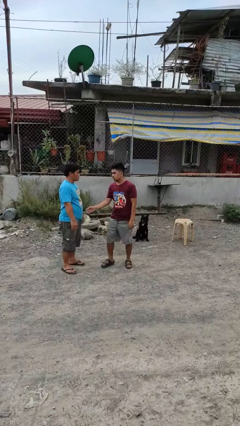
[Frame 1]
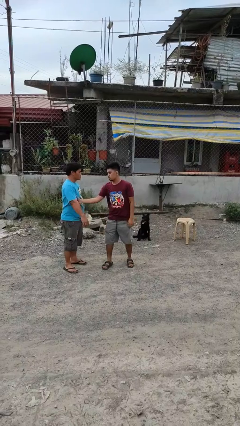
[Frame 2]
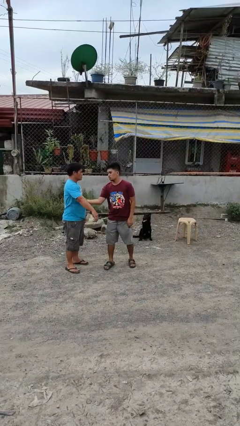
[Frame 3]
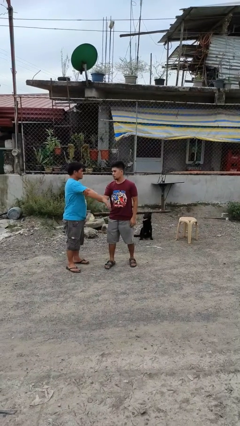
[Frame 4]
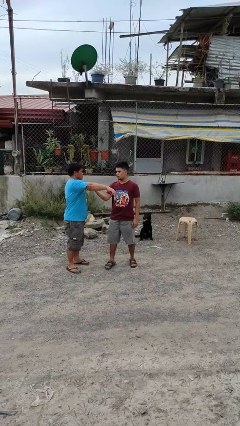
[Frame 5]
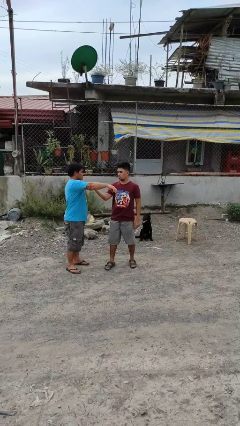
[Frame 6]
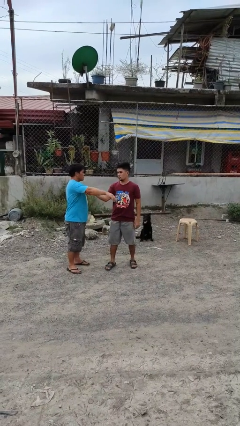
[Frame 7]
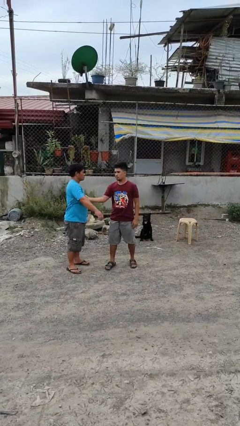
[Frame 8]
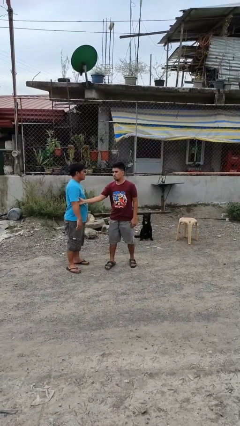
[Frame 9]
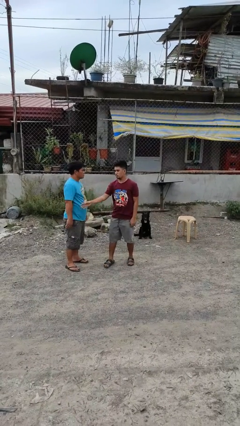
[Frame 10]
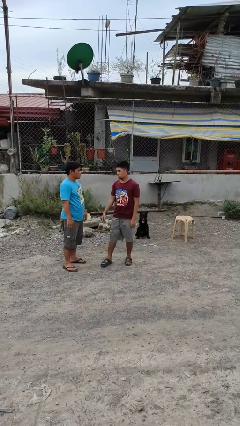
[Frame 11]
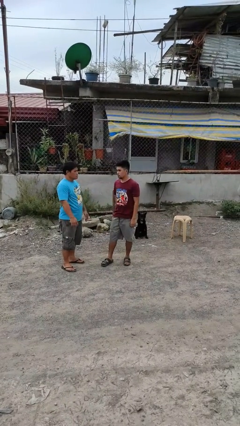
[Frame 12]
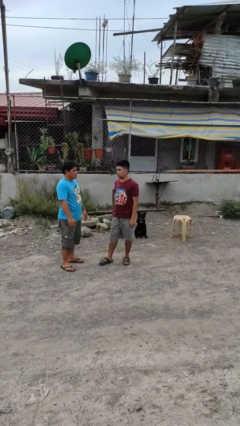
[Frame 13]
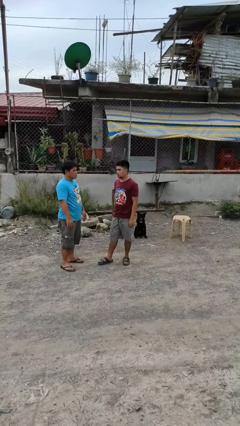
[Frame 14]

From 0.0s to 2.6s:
person grabs person by bicep

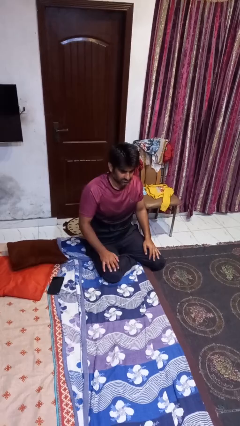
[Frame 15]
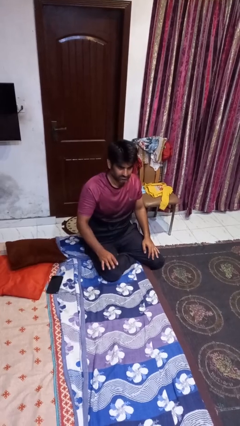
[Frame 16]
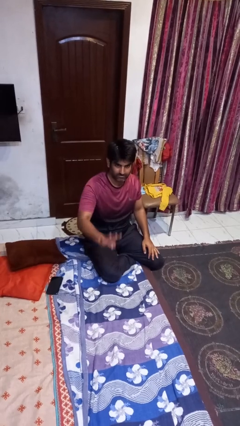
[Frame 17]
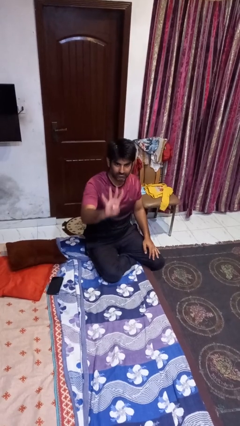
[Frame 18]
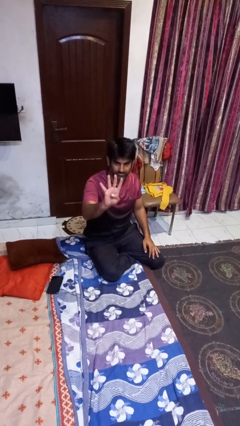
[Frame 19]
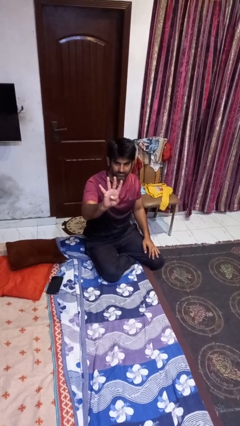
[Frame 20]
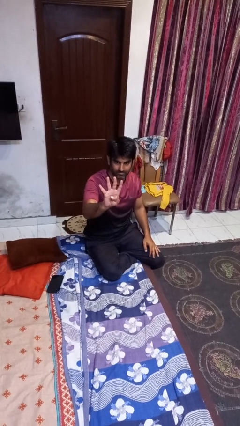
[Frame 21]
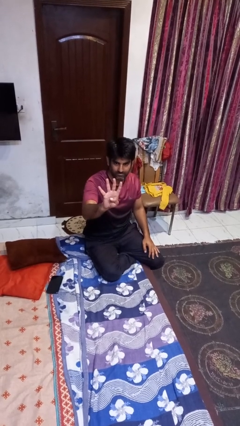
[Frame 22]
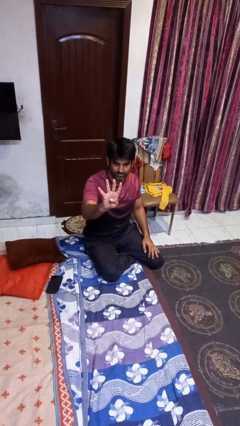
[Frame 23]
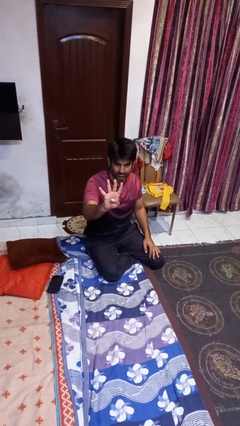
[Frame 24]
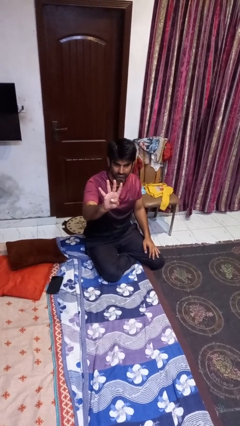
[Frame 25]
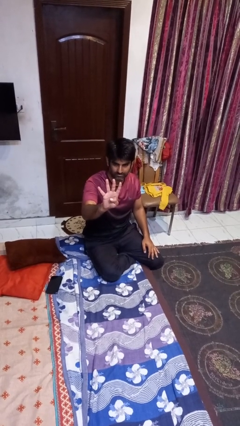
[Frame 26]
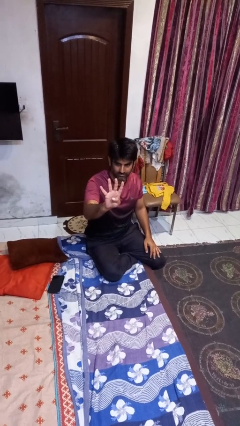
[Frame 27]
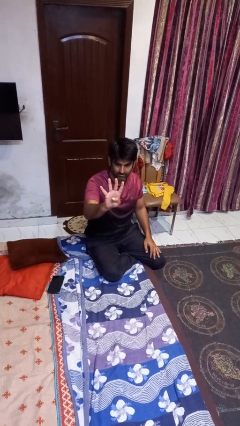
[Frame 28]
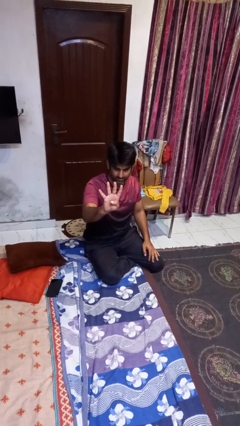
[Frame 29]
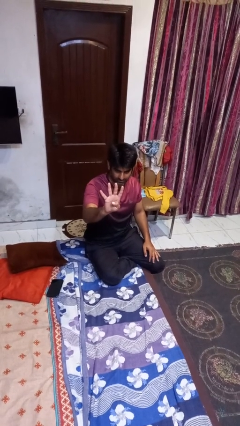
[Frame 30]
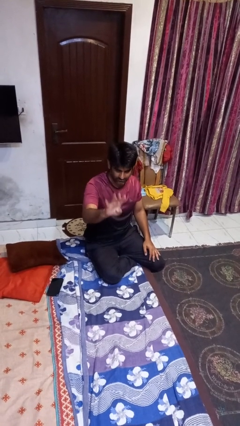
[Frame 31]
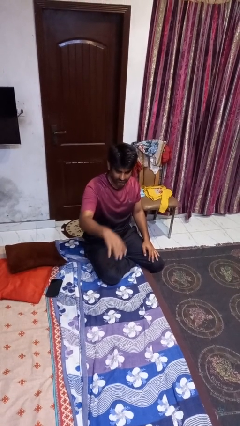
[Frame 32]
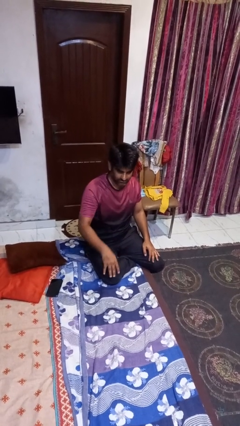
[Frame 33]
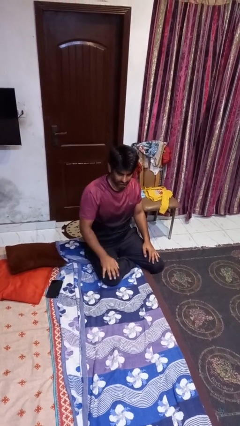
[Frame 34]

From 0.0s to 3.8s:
person gestures number four

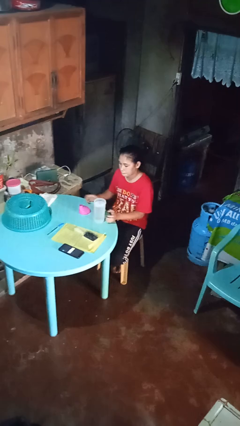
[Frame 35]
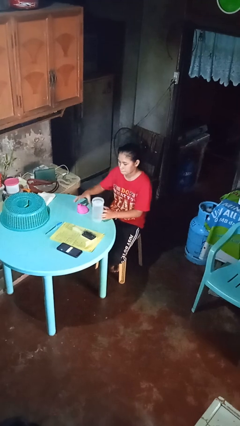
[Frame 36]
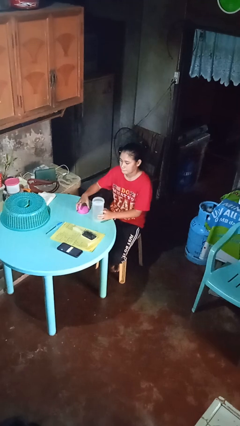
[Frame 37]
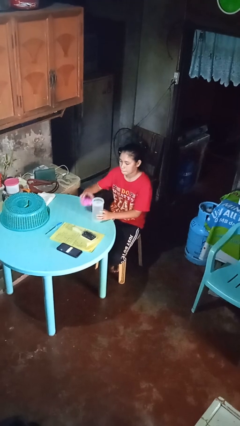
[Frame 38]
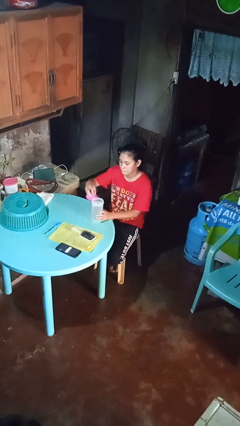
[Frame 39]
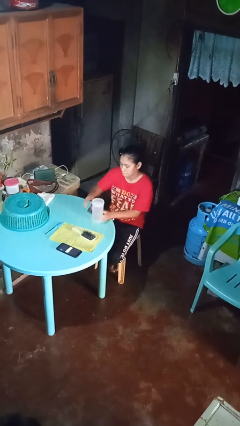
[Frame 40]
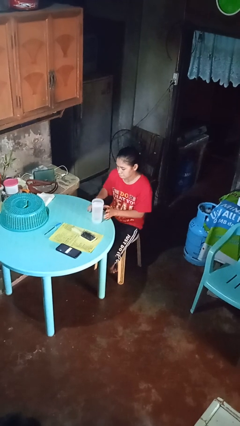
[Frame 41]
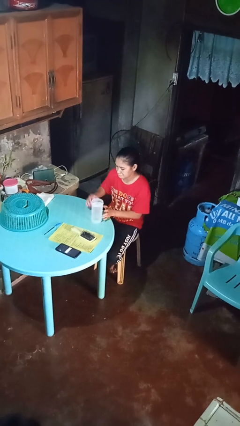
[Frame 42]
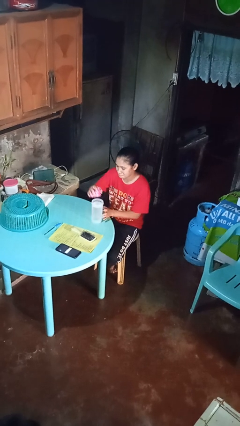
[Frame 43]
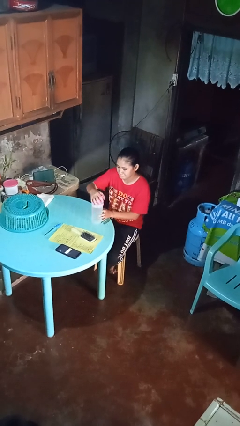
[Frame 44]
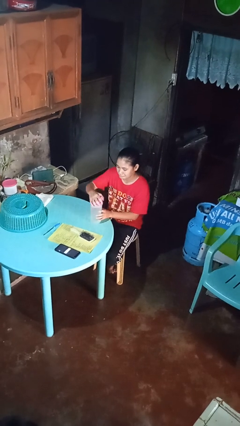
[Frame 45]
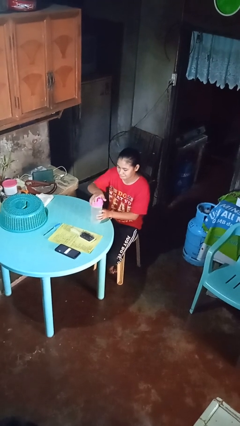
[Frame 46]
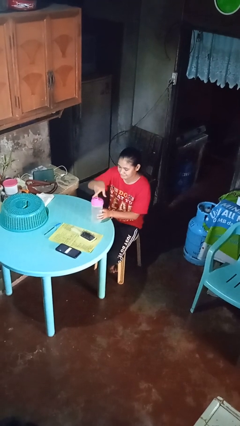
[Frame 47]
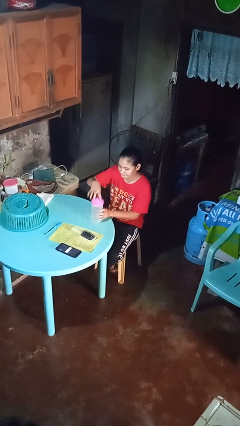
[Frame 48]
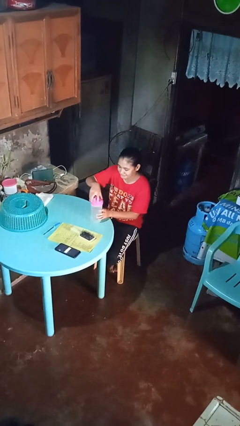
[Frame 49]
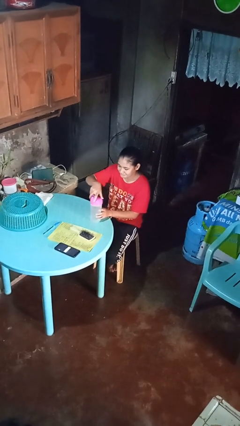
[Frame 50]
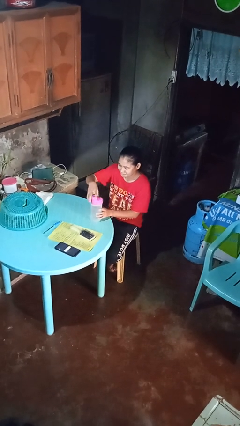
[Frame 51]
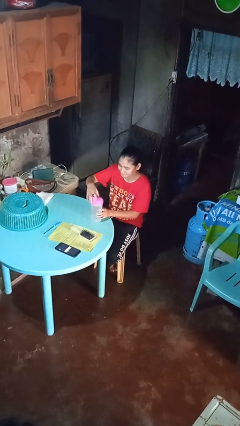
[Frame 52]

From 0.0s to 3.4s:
person screws lid to bottle

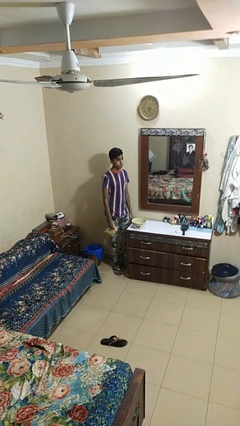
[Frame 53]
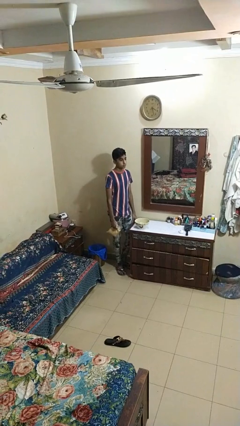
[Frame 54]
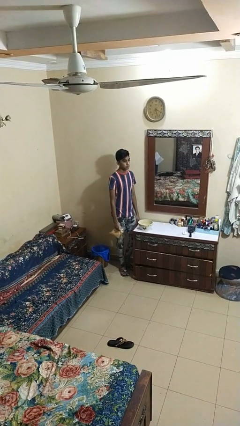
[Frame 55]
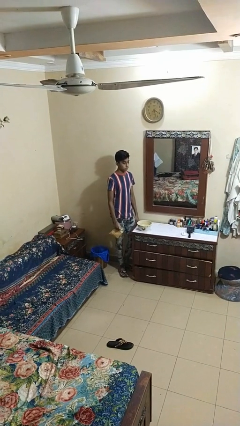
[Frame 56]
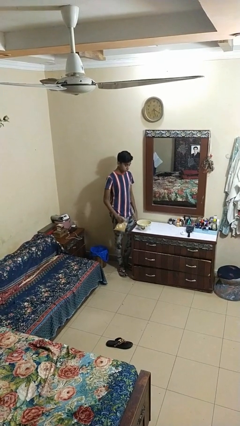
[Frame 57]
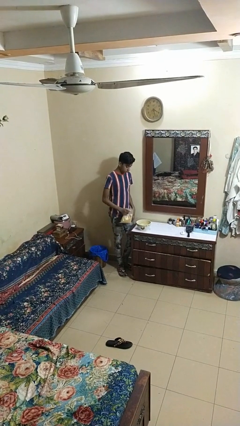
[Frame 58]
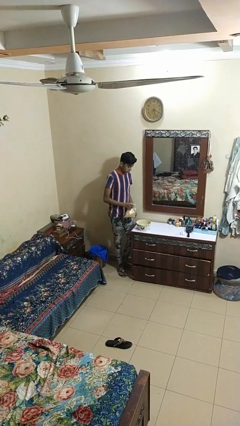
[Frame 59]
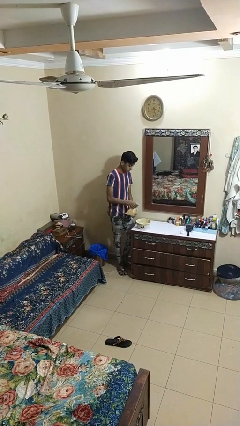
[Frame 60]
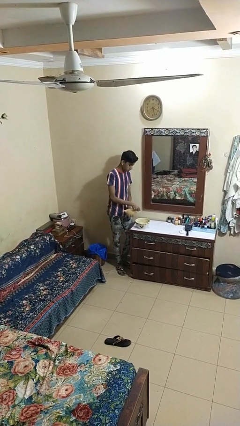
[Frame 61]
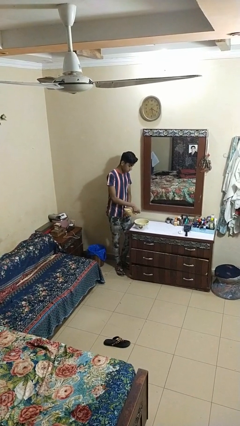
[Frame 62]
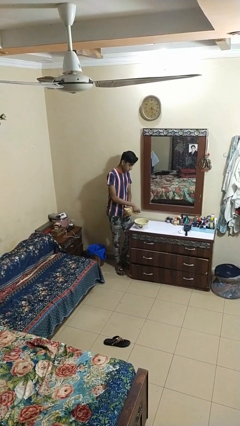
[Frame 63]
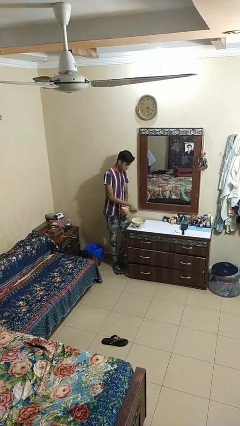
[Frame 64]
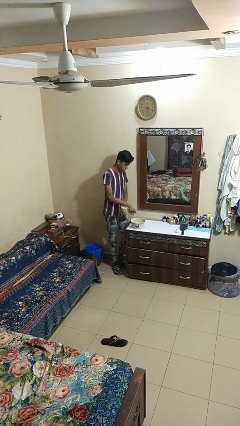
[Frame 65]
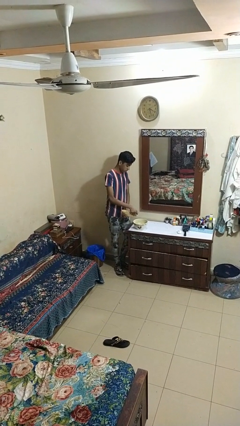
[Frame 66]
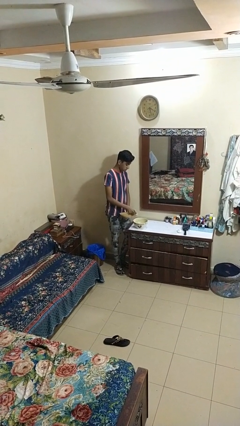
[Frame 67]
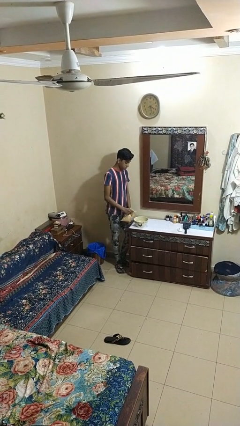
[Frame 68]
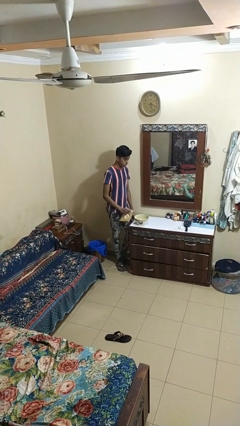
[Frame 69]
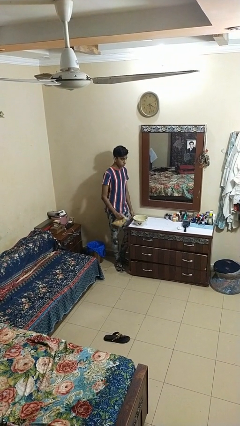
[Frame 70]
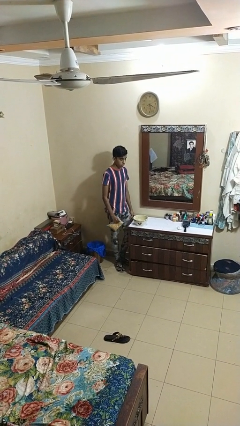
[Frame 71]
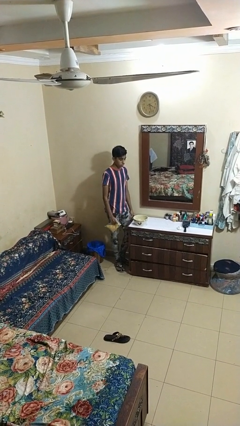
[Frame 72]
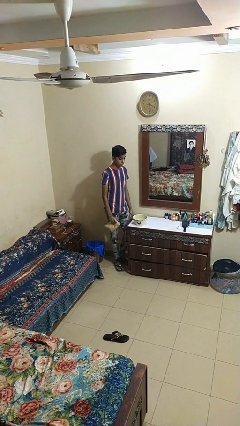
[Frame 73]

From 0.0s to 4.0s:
person pours into bowl

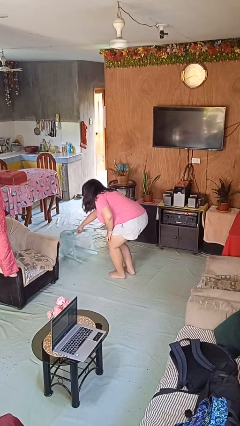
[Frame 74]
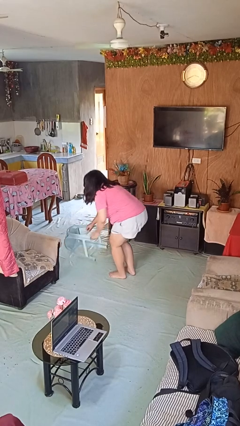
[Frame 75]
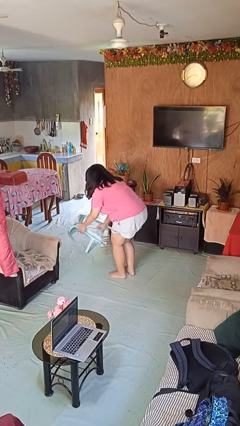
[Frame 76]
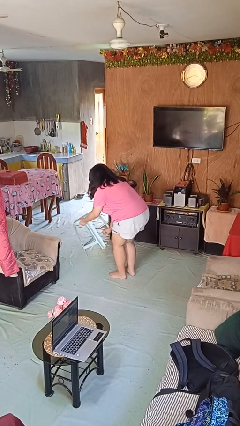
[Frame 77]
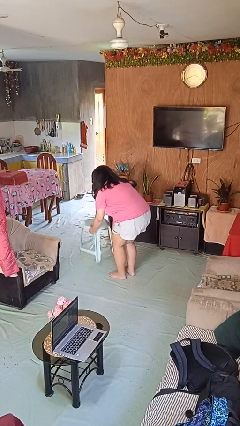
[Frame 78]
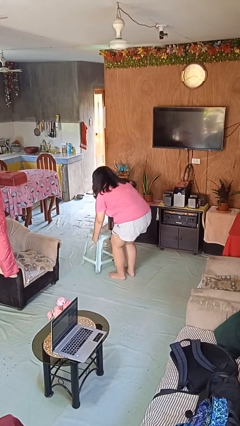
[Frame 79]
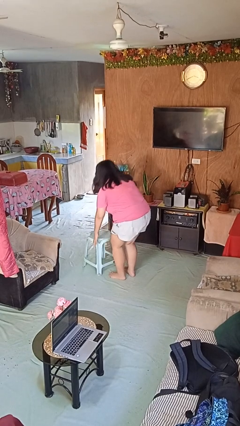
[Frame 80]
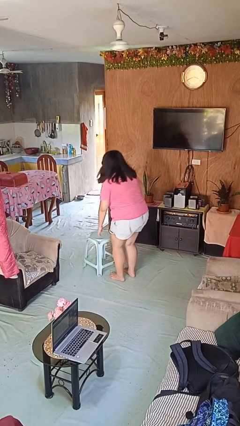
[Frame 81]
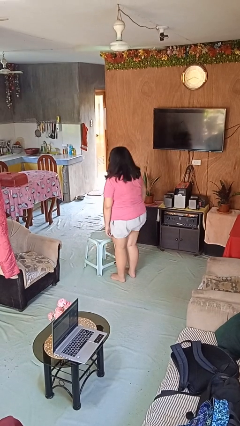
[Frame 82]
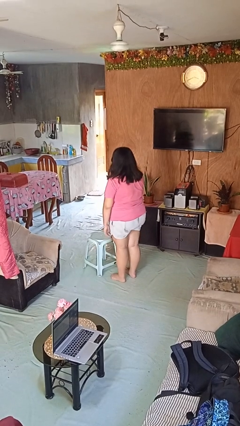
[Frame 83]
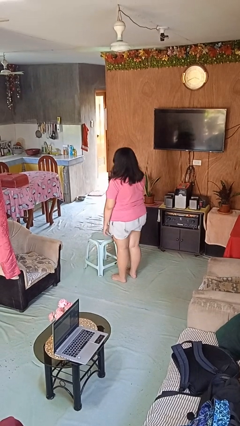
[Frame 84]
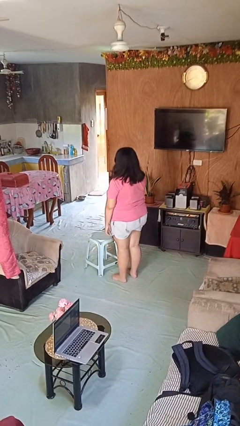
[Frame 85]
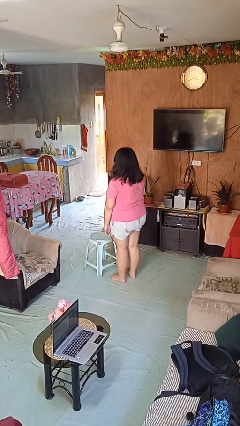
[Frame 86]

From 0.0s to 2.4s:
person sets upright furniture

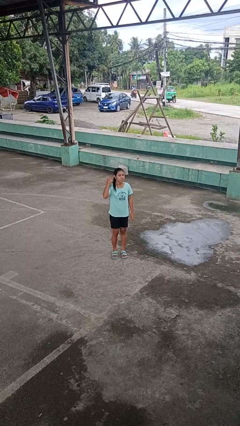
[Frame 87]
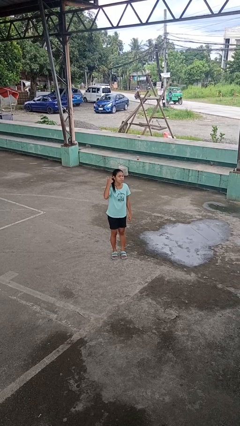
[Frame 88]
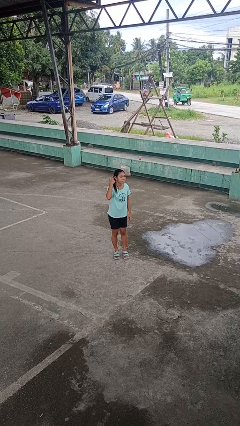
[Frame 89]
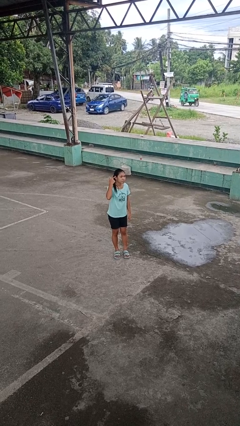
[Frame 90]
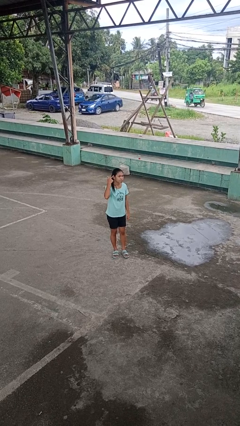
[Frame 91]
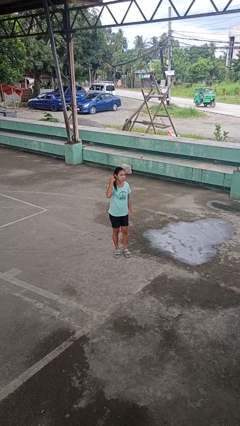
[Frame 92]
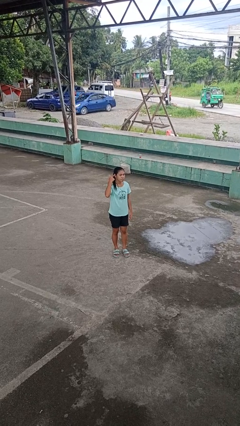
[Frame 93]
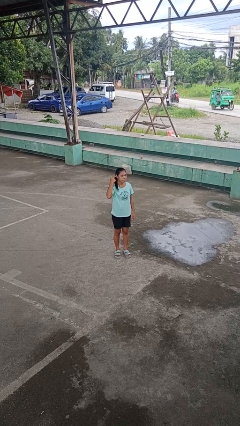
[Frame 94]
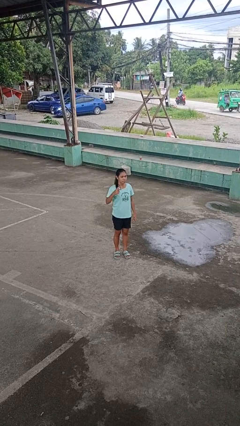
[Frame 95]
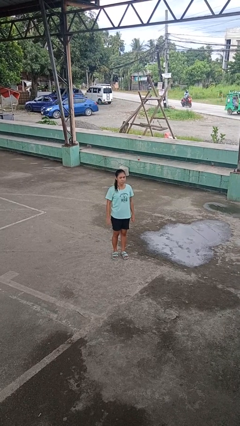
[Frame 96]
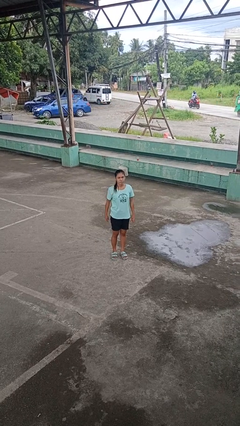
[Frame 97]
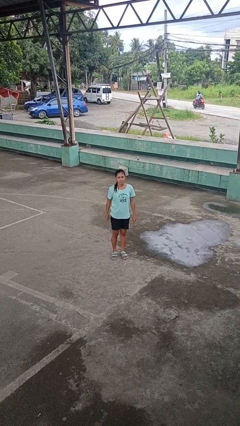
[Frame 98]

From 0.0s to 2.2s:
person gestures listen closely
